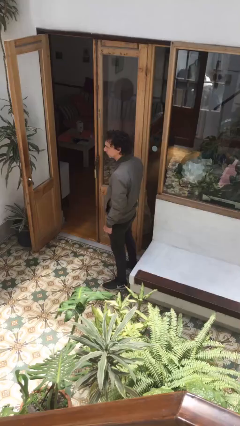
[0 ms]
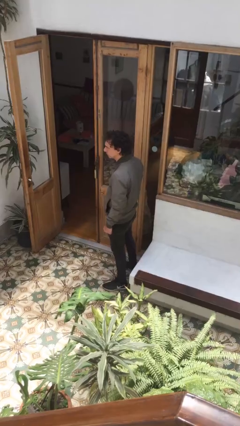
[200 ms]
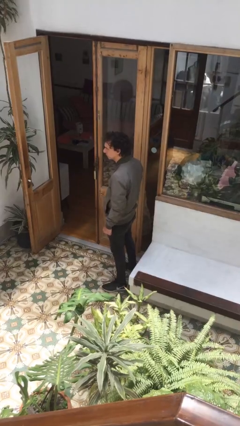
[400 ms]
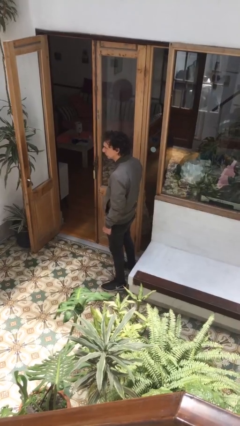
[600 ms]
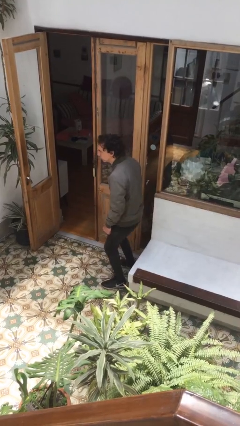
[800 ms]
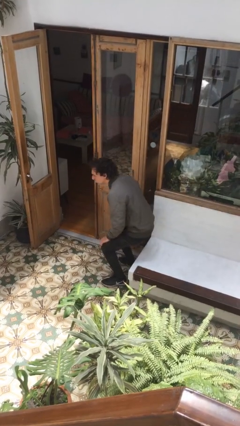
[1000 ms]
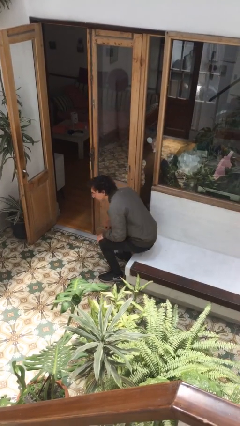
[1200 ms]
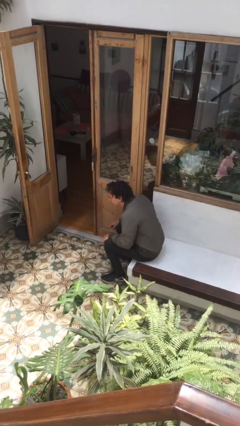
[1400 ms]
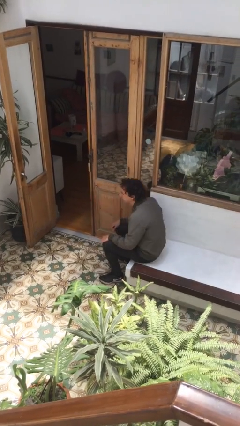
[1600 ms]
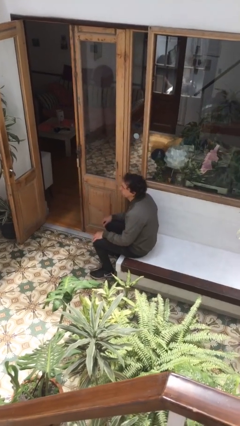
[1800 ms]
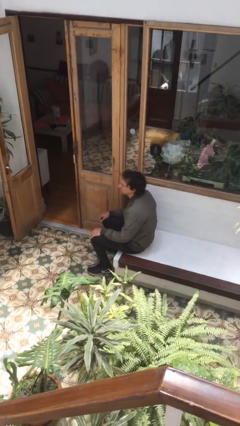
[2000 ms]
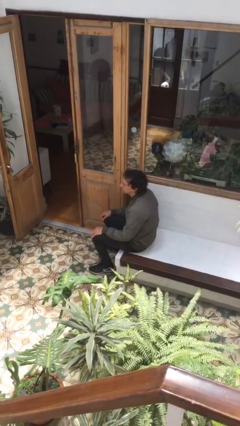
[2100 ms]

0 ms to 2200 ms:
person sits down

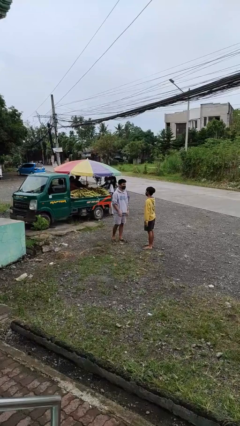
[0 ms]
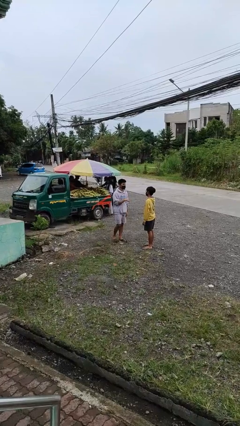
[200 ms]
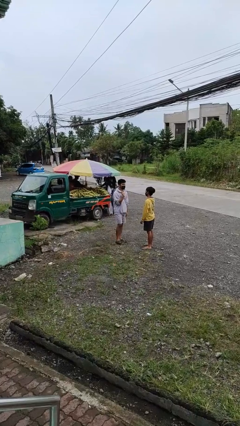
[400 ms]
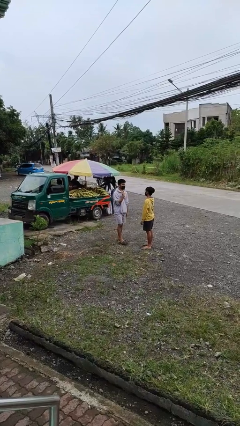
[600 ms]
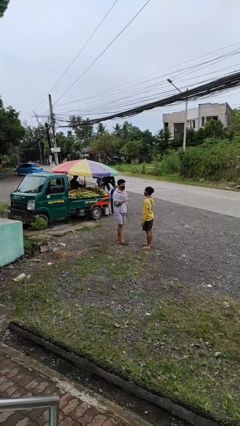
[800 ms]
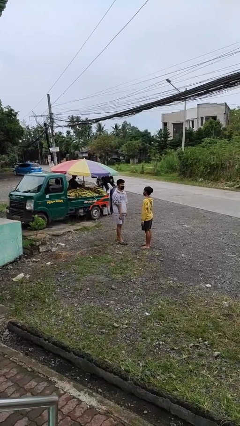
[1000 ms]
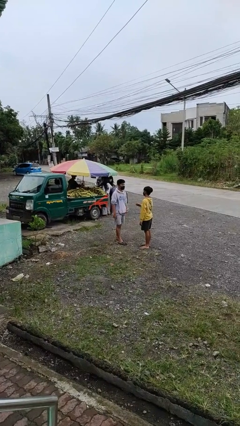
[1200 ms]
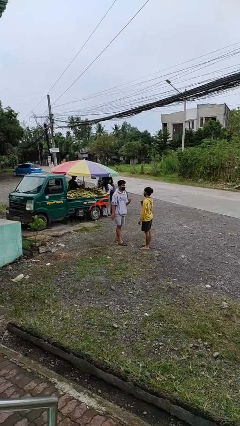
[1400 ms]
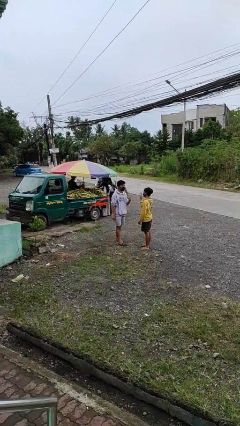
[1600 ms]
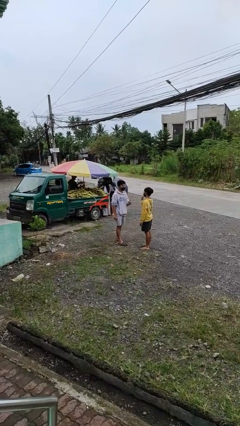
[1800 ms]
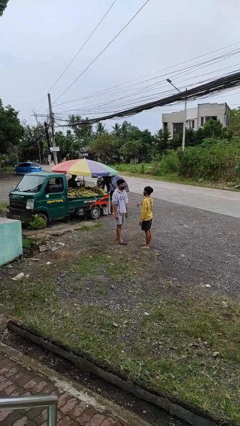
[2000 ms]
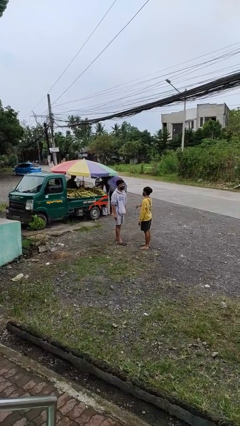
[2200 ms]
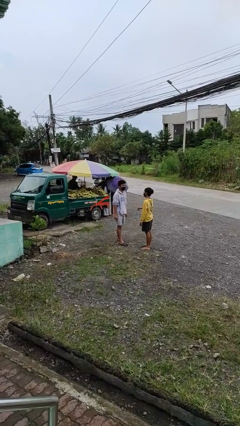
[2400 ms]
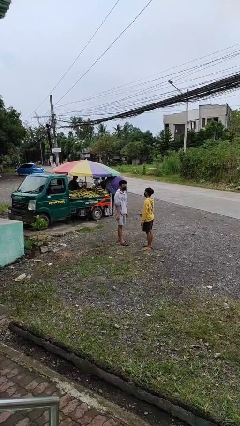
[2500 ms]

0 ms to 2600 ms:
person talks to person

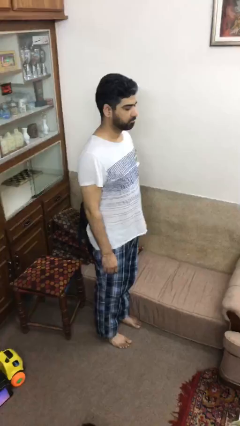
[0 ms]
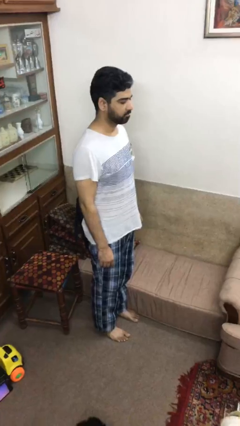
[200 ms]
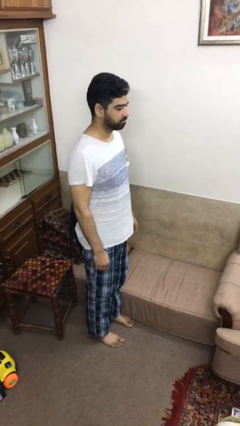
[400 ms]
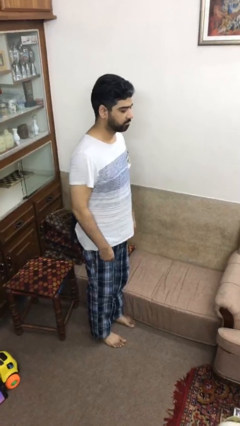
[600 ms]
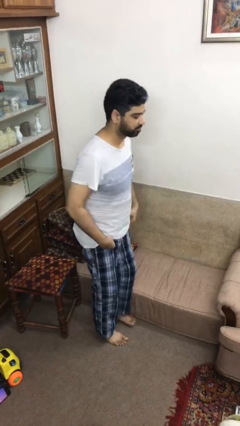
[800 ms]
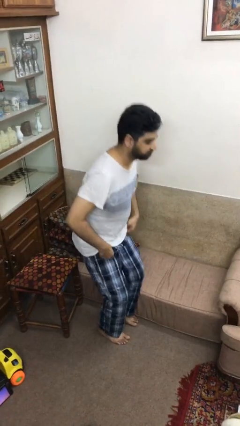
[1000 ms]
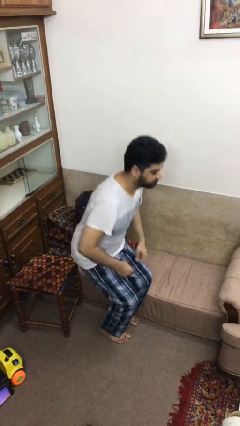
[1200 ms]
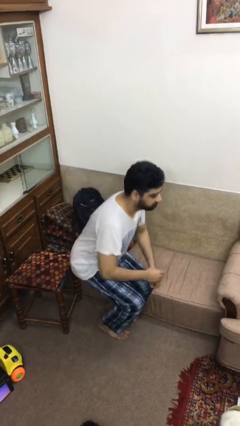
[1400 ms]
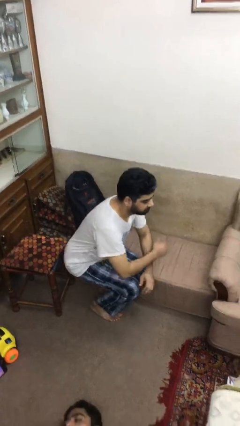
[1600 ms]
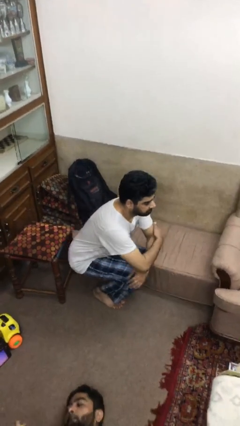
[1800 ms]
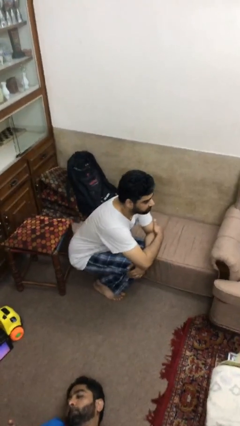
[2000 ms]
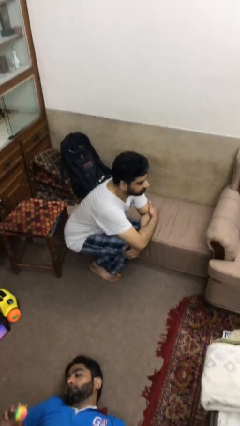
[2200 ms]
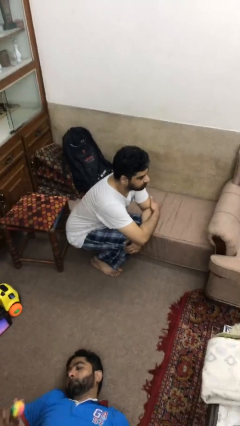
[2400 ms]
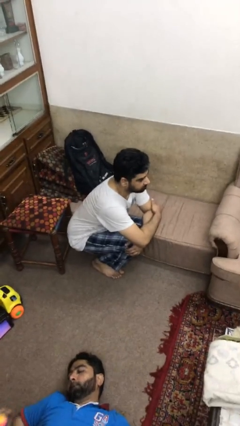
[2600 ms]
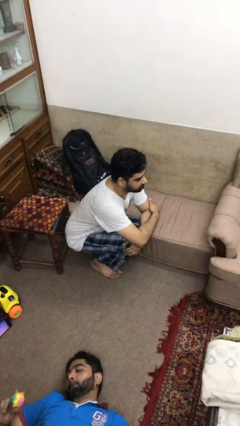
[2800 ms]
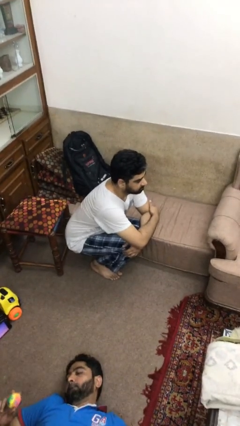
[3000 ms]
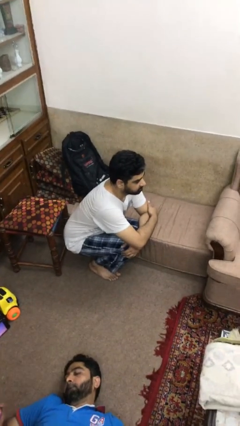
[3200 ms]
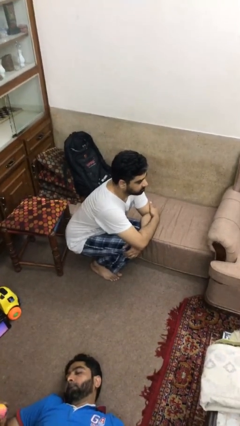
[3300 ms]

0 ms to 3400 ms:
person squats

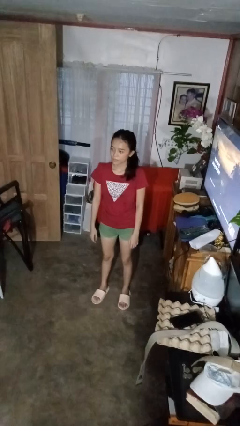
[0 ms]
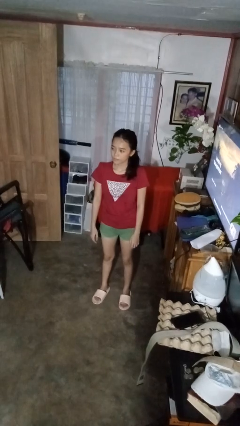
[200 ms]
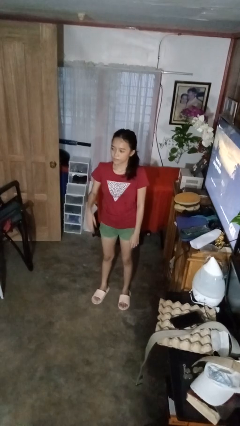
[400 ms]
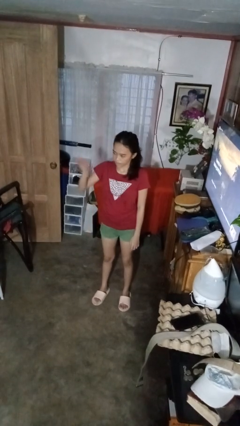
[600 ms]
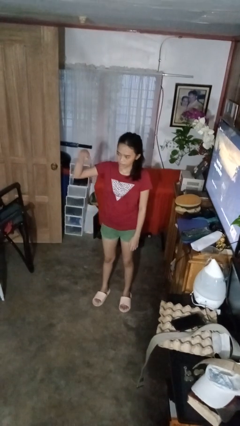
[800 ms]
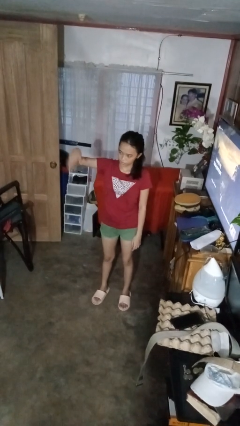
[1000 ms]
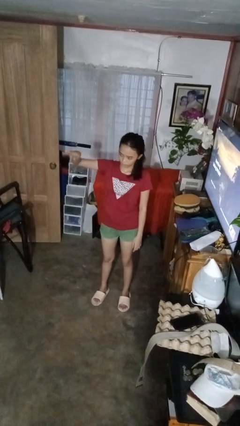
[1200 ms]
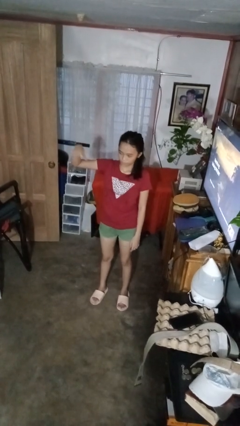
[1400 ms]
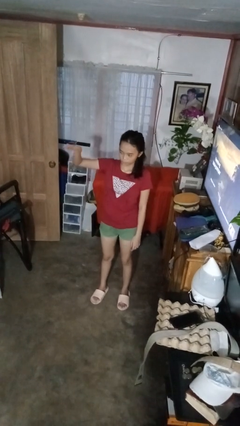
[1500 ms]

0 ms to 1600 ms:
person gestures come here

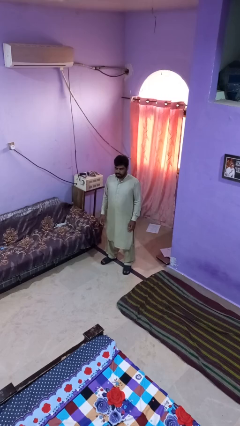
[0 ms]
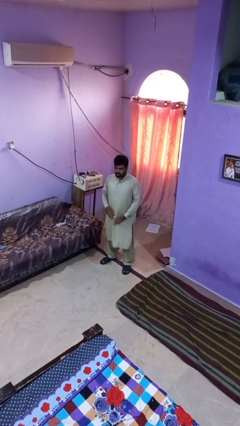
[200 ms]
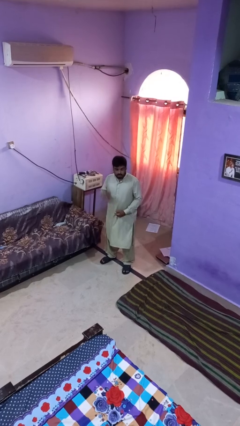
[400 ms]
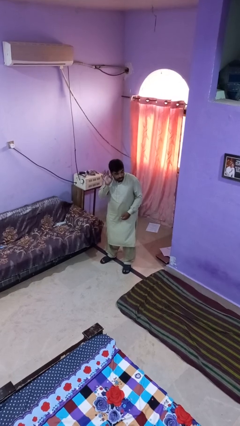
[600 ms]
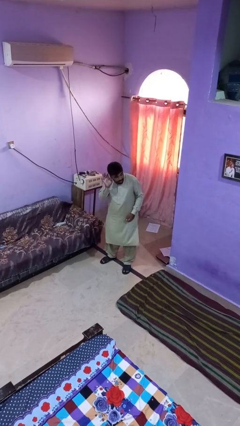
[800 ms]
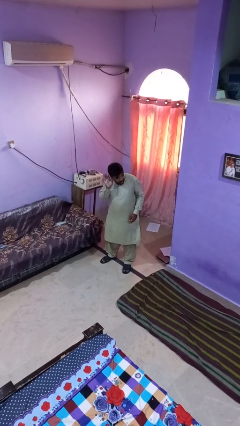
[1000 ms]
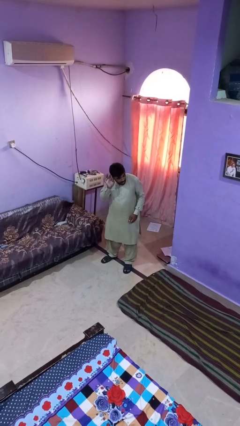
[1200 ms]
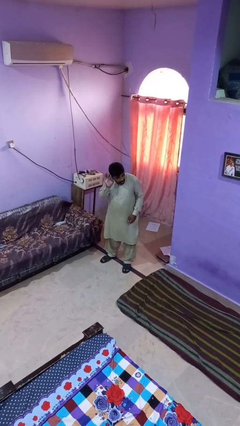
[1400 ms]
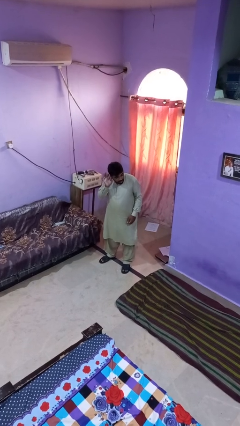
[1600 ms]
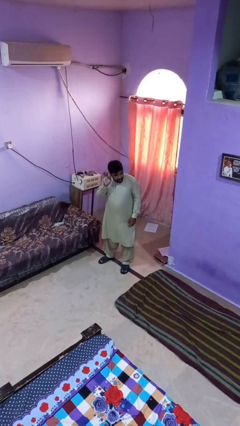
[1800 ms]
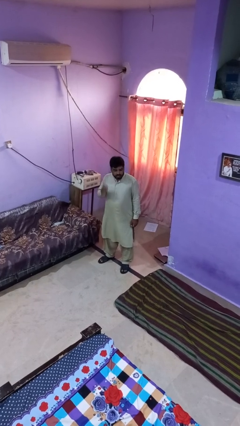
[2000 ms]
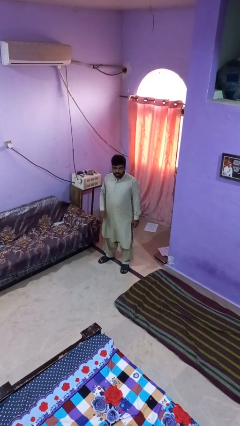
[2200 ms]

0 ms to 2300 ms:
person gestures listen closely

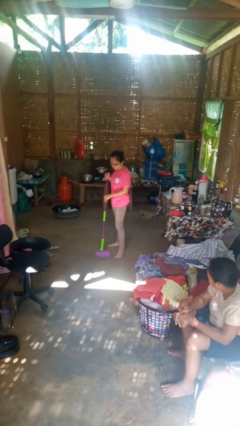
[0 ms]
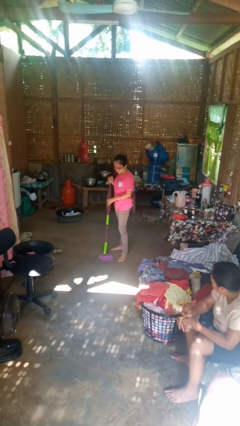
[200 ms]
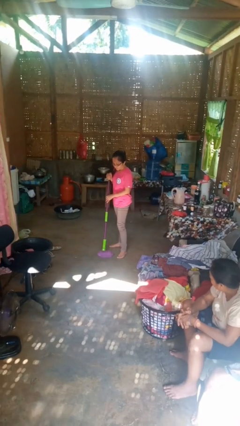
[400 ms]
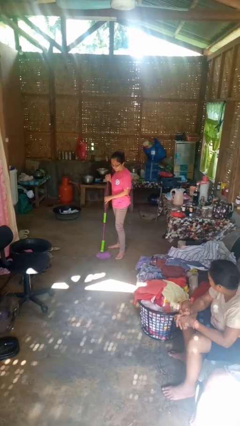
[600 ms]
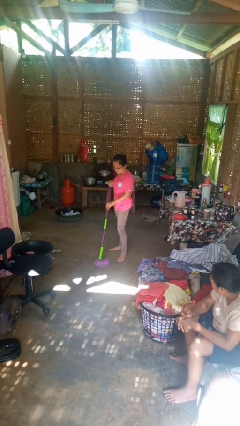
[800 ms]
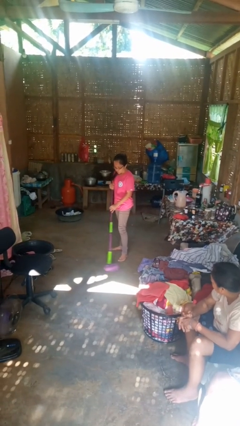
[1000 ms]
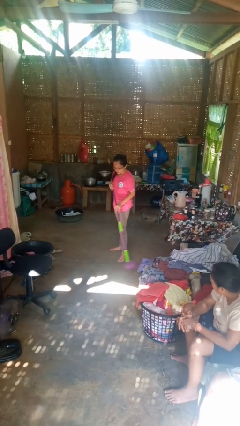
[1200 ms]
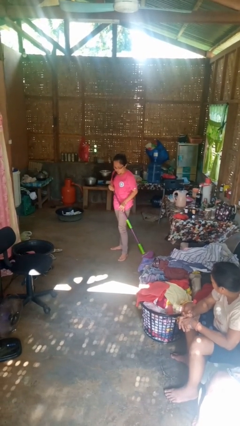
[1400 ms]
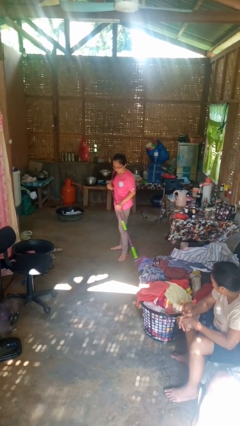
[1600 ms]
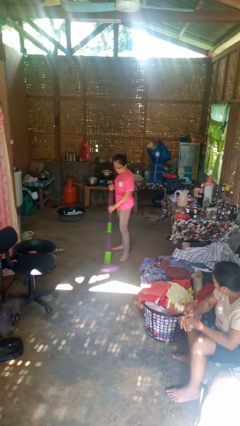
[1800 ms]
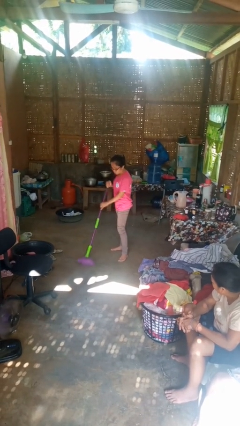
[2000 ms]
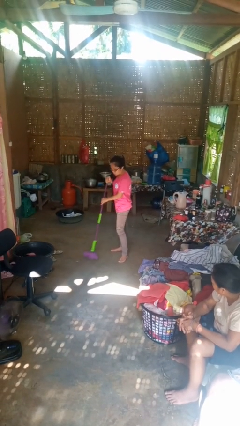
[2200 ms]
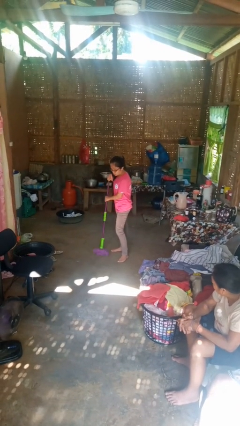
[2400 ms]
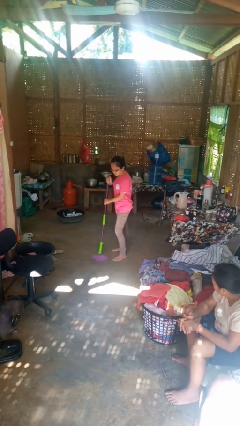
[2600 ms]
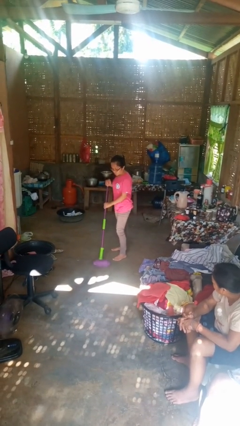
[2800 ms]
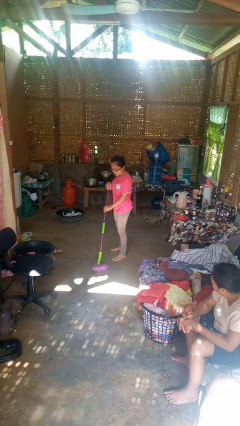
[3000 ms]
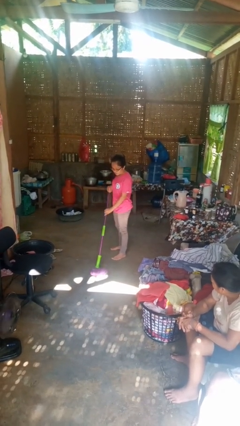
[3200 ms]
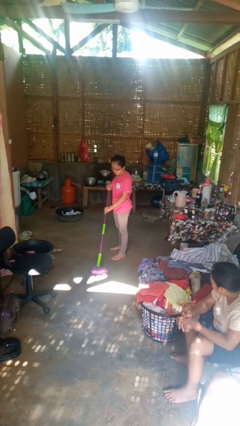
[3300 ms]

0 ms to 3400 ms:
person mops

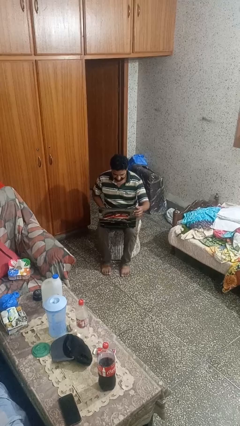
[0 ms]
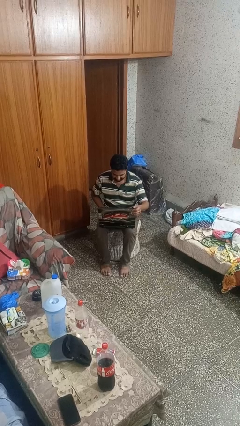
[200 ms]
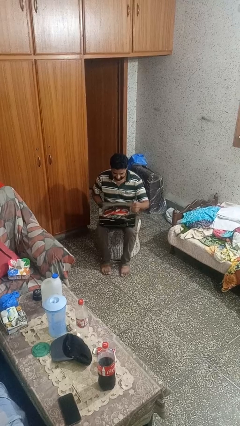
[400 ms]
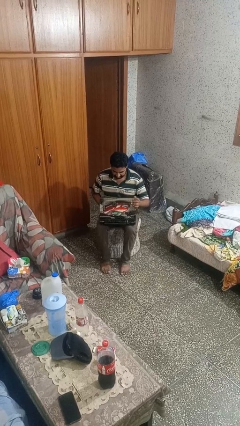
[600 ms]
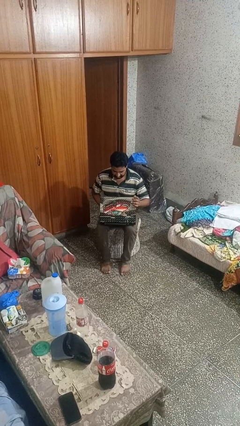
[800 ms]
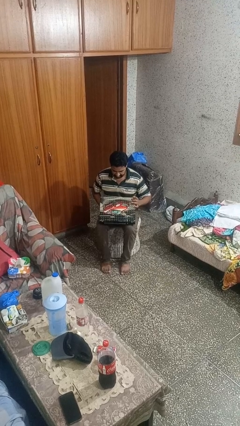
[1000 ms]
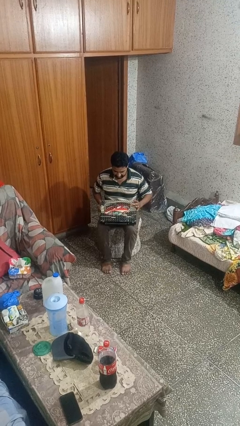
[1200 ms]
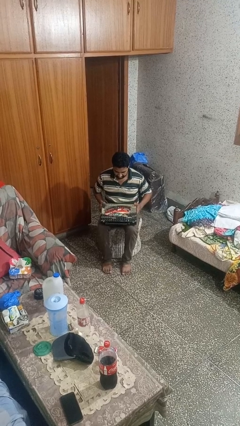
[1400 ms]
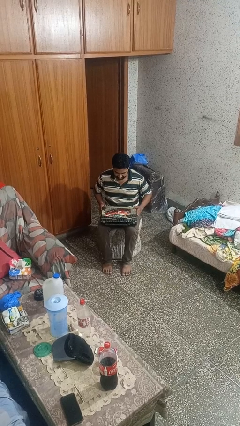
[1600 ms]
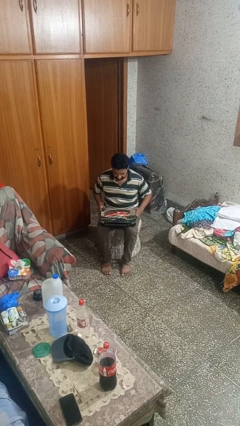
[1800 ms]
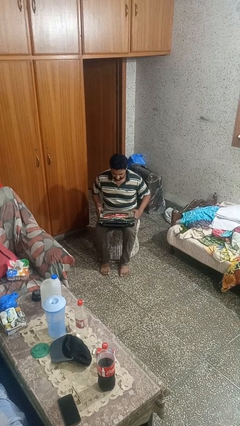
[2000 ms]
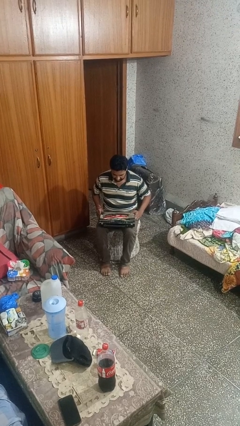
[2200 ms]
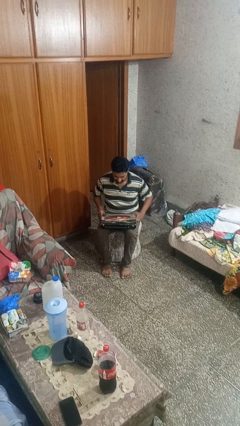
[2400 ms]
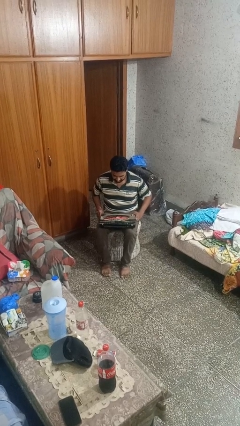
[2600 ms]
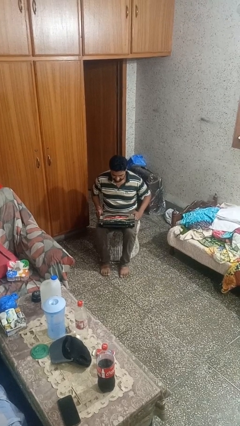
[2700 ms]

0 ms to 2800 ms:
person closes laptop
